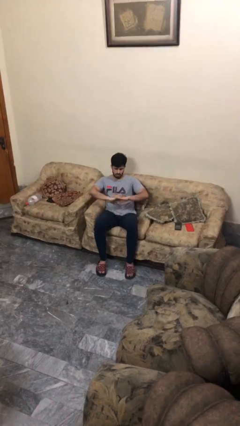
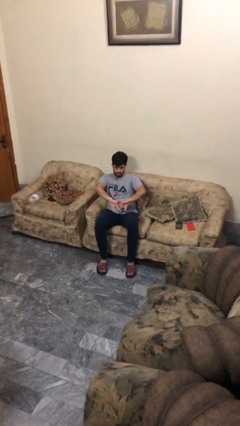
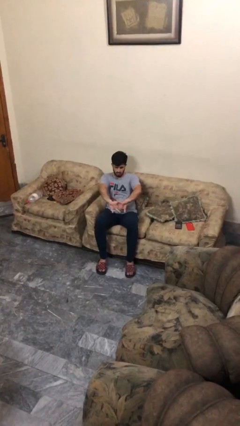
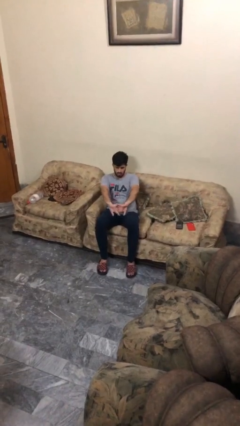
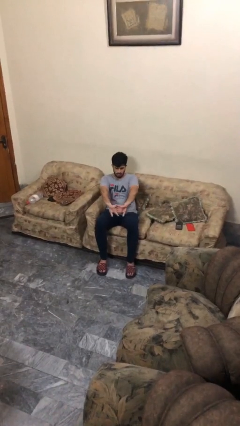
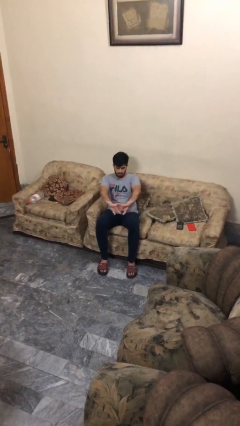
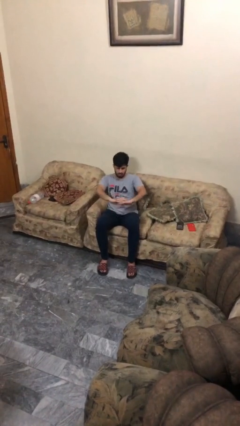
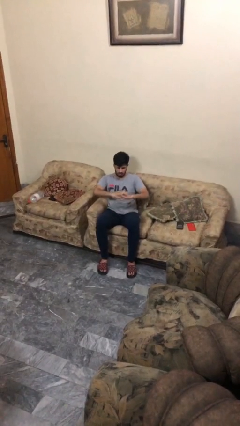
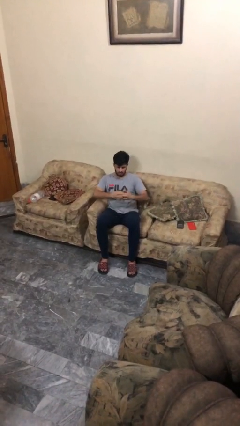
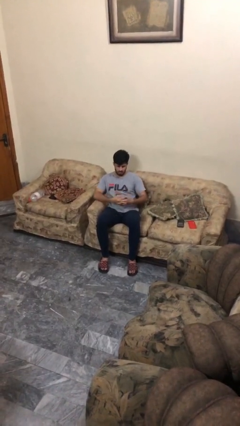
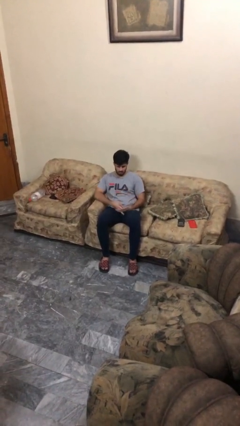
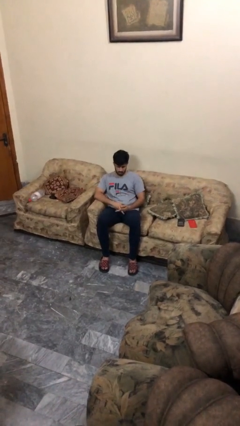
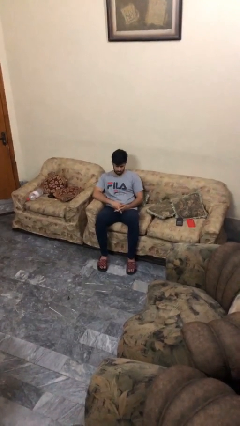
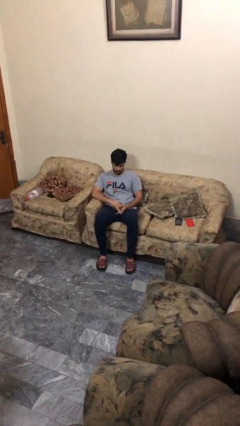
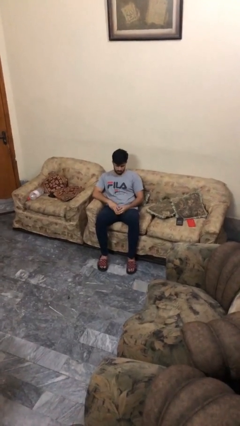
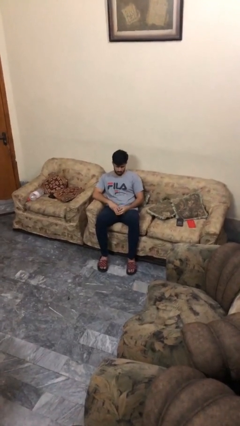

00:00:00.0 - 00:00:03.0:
person cracks knuckles

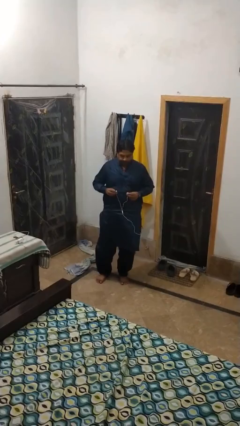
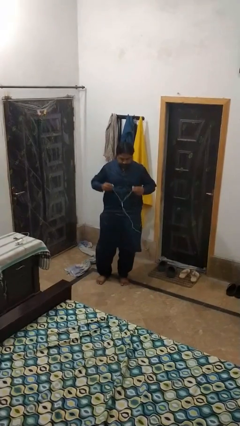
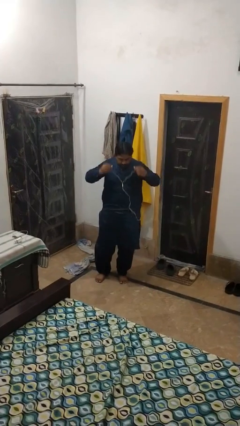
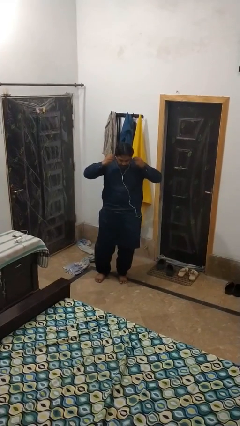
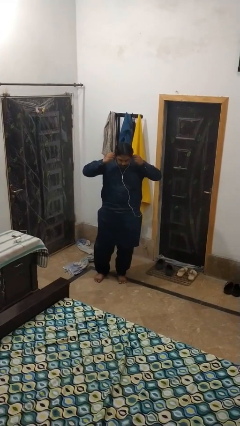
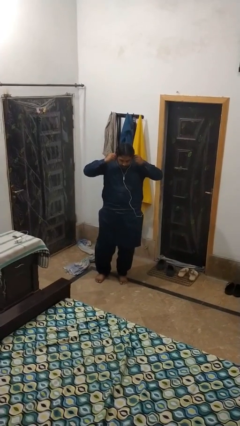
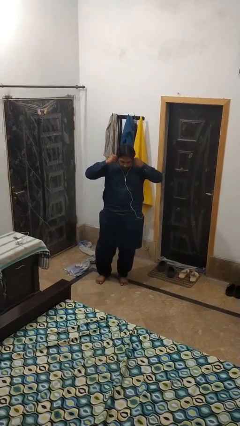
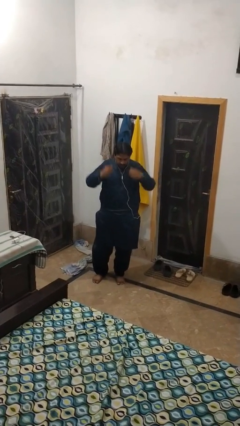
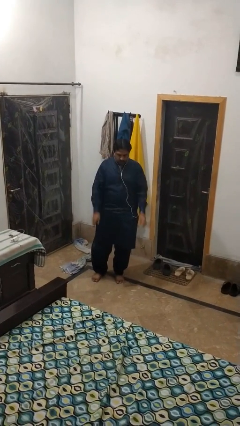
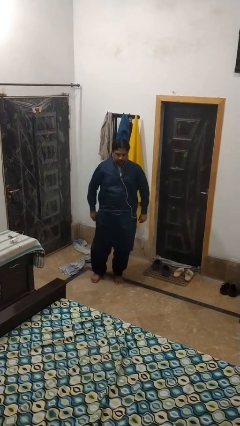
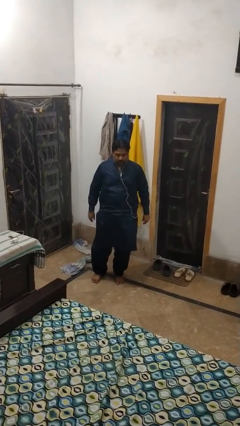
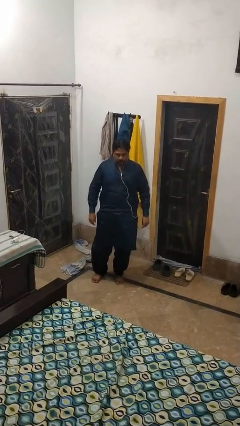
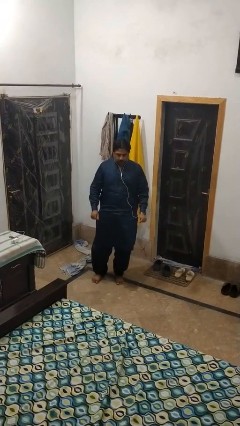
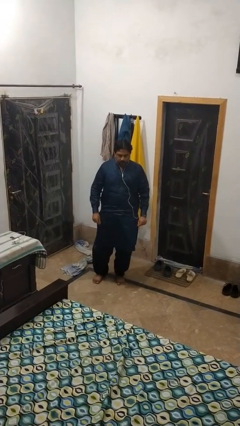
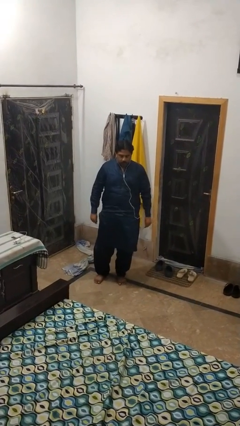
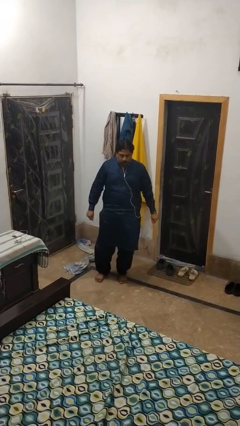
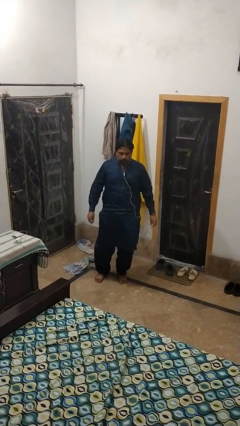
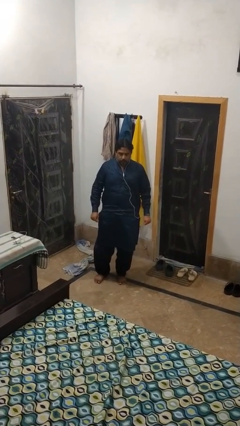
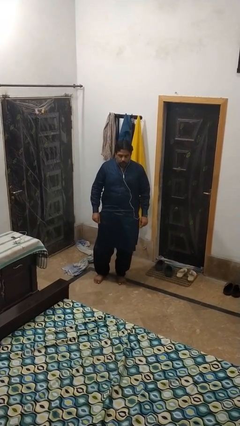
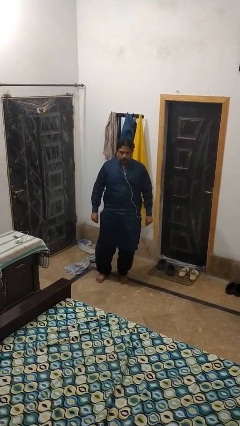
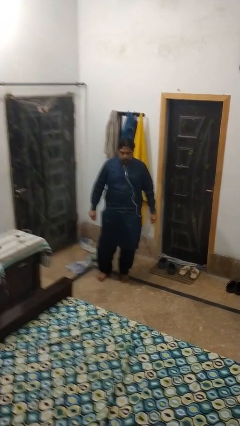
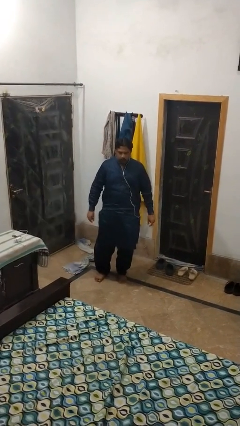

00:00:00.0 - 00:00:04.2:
person puts on headphones

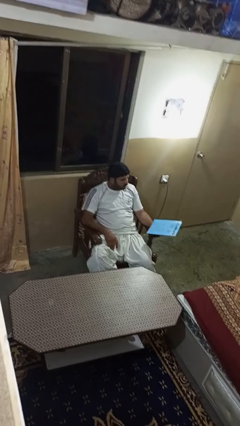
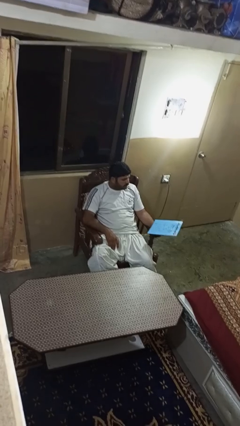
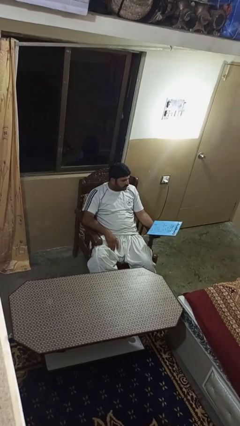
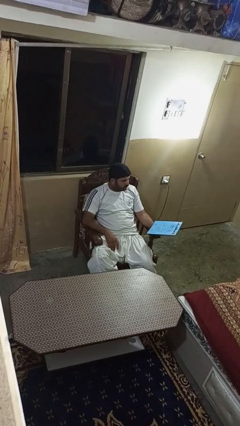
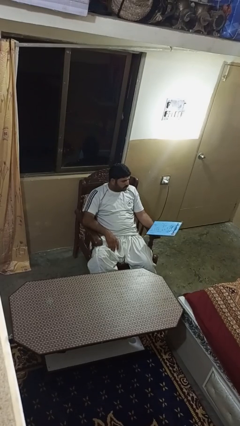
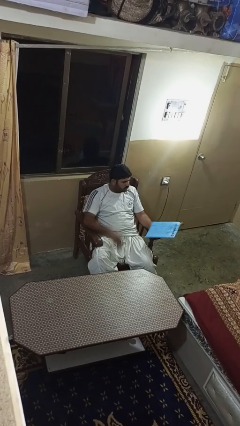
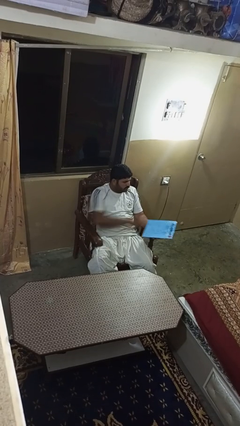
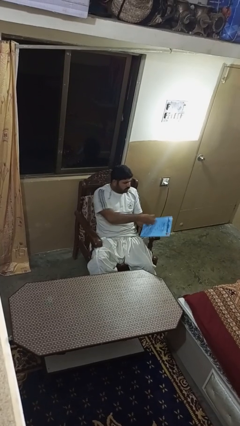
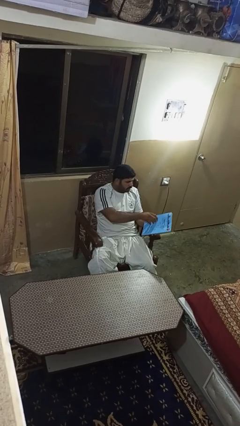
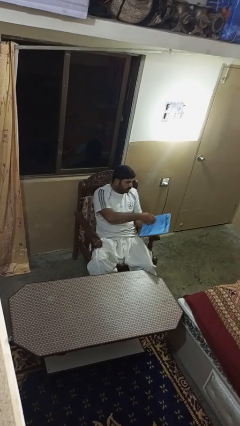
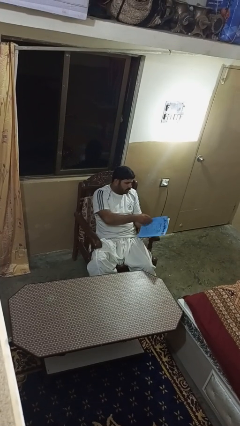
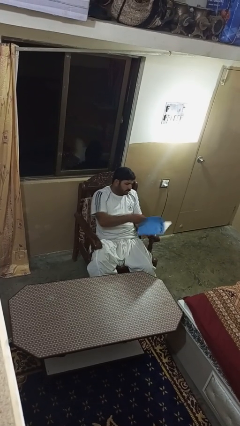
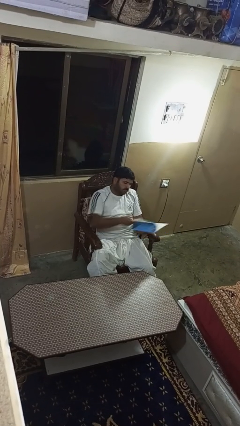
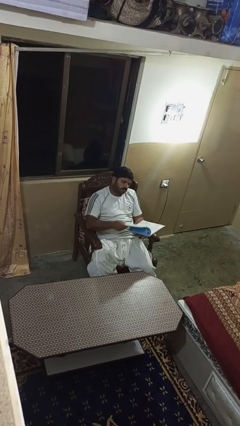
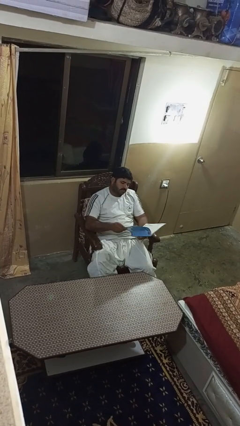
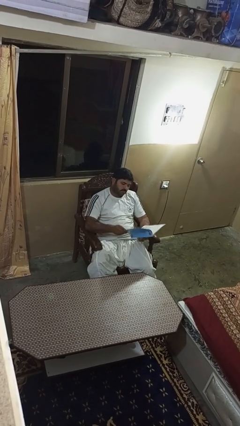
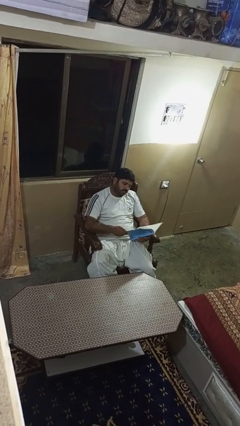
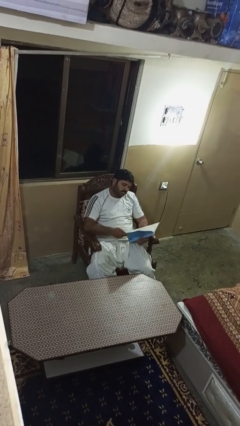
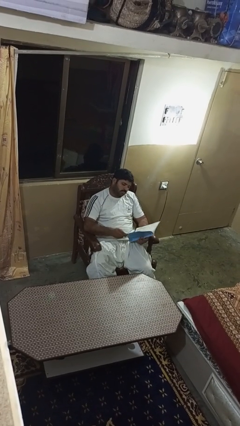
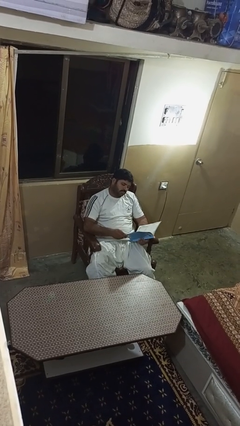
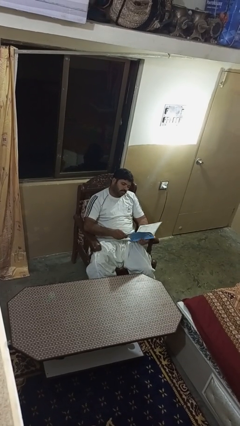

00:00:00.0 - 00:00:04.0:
person reads magazine

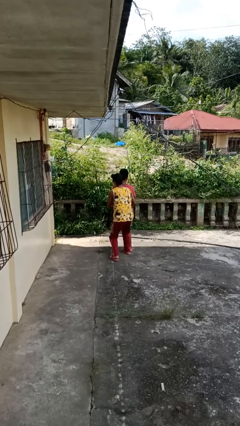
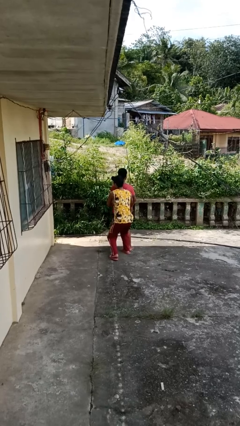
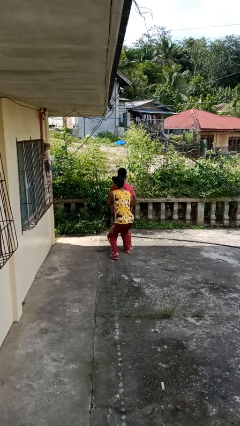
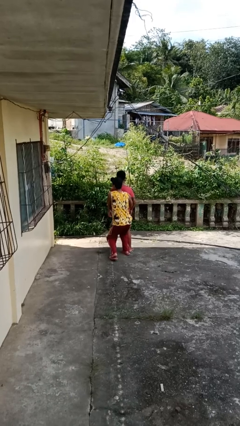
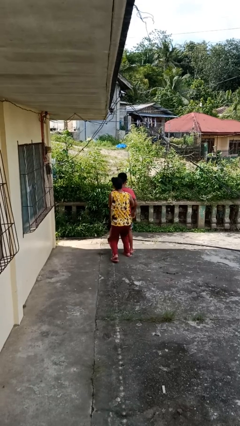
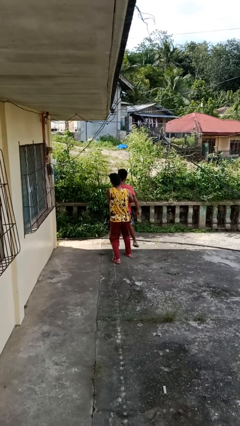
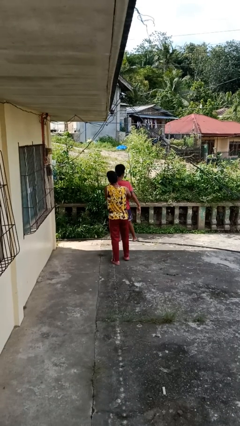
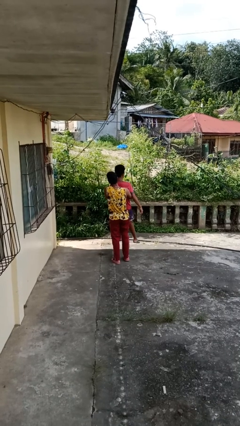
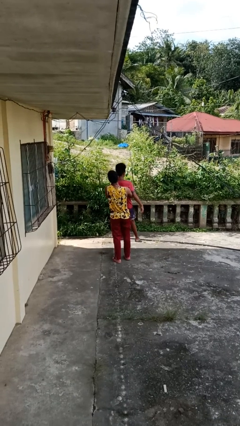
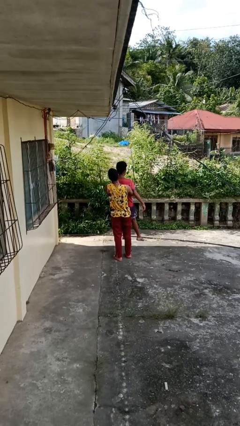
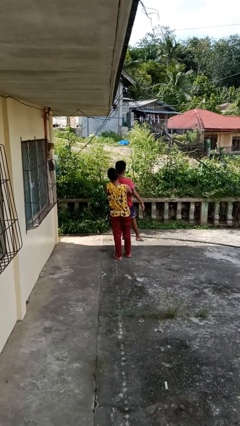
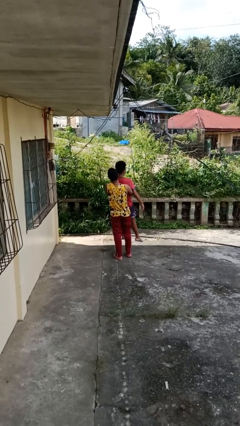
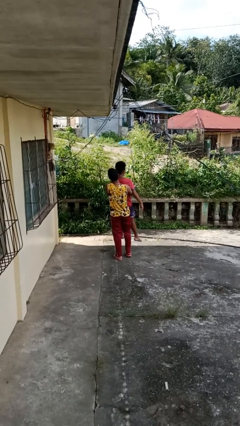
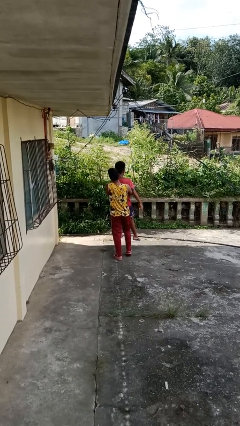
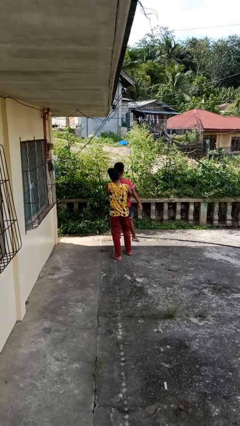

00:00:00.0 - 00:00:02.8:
person picks up person

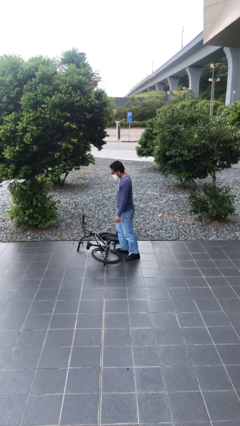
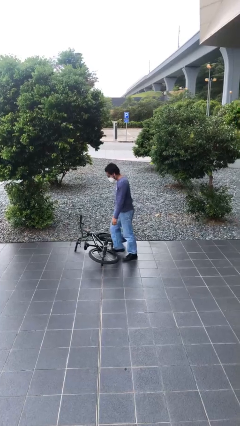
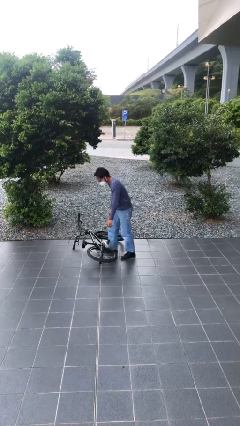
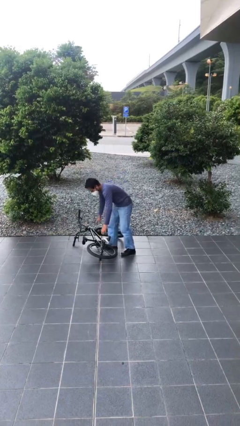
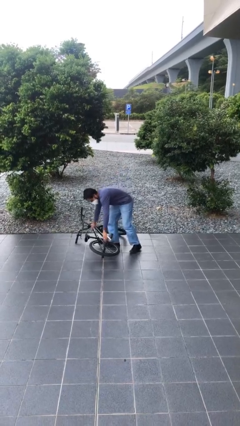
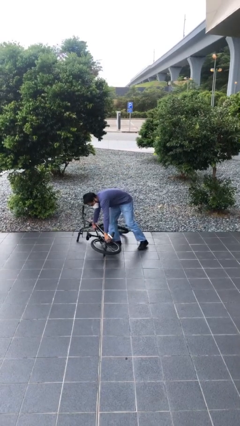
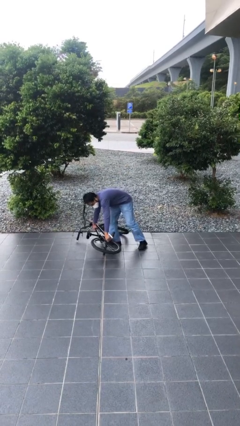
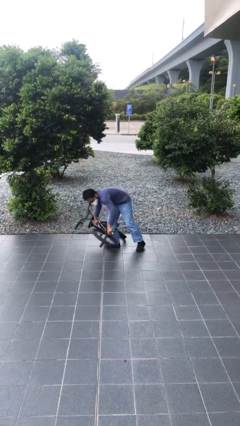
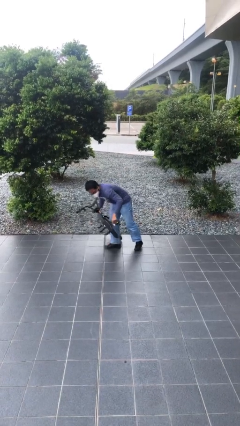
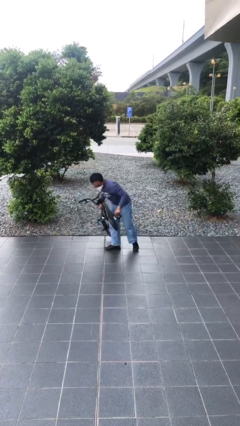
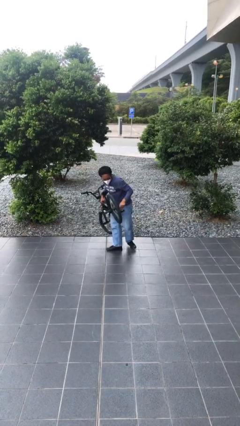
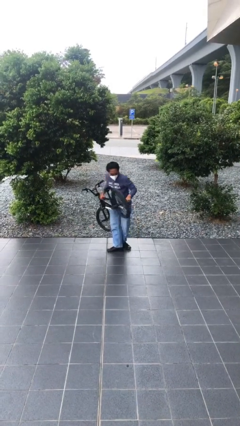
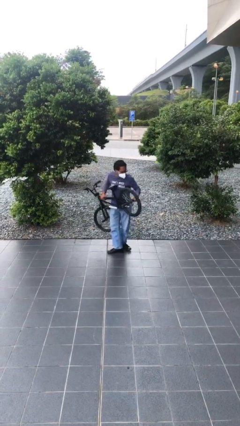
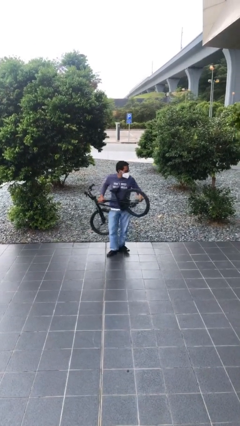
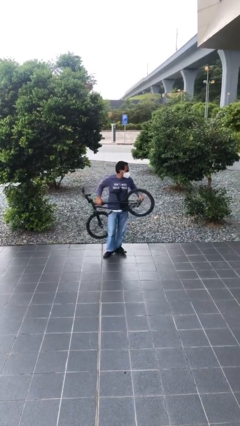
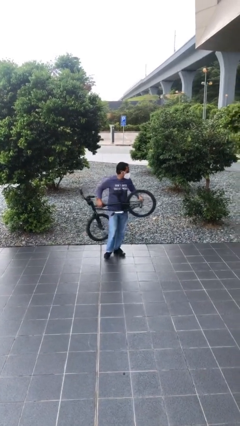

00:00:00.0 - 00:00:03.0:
person picks up object from floor

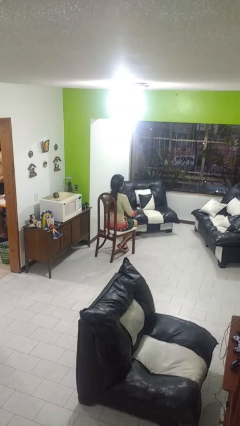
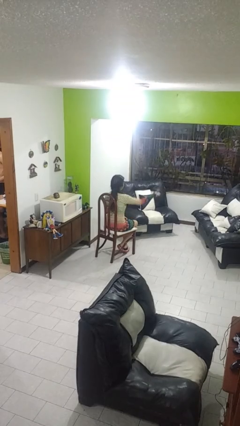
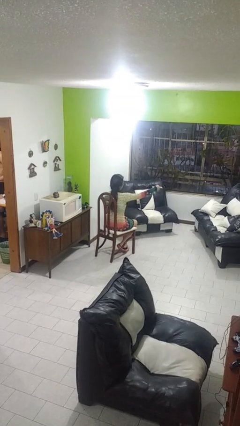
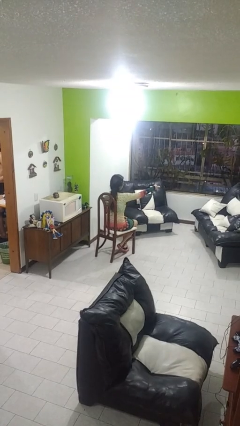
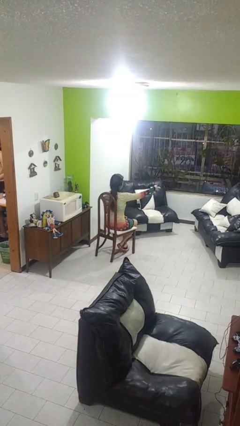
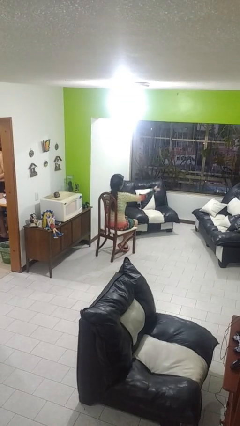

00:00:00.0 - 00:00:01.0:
person uses television remote
